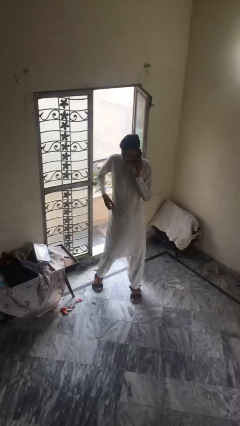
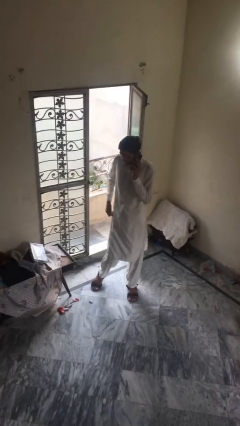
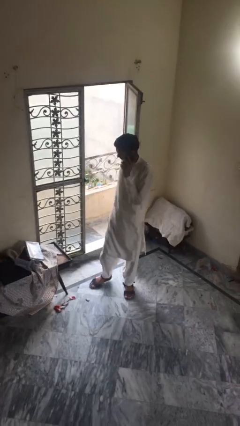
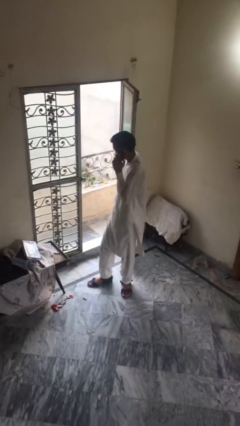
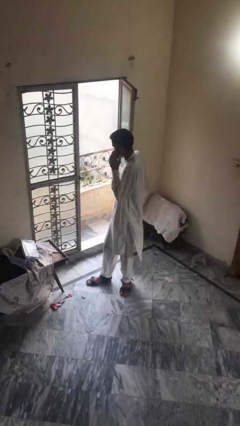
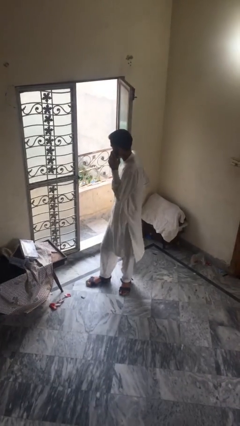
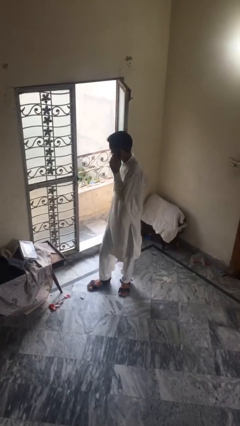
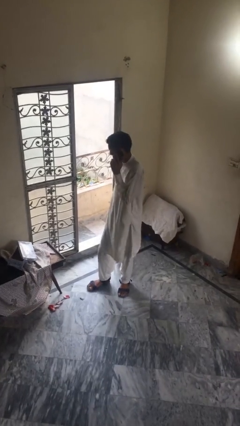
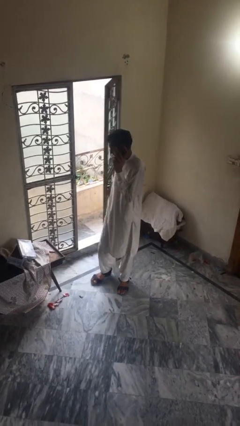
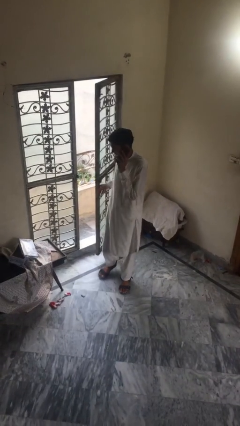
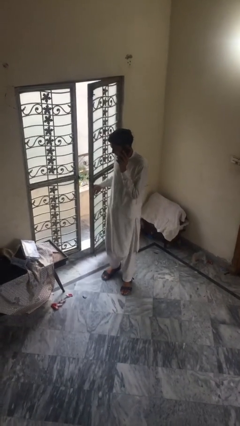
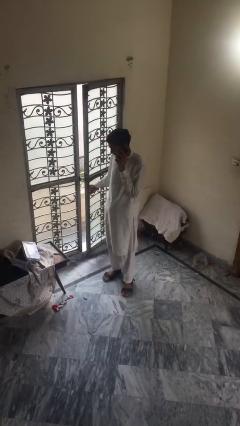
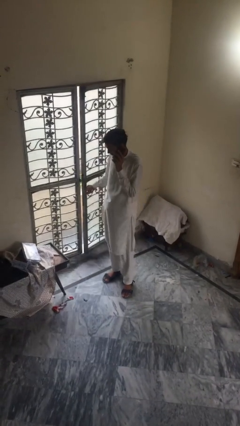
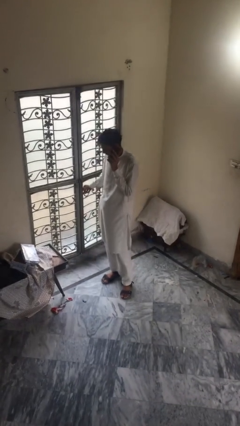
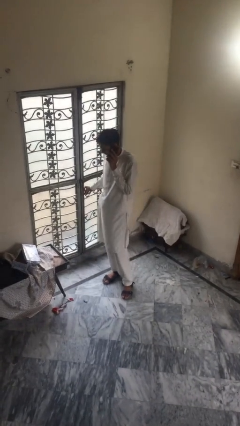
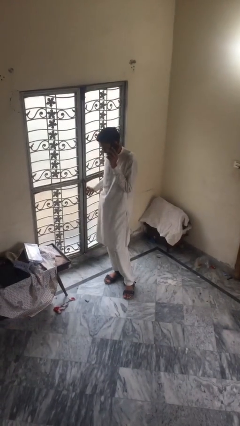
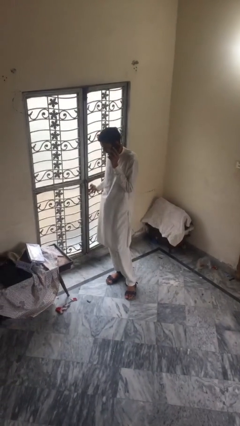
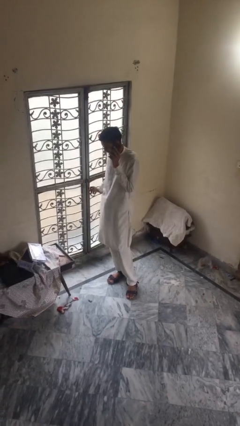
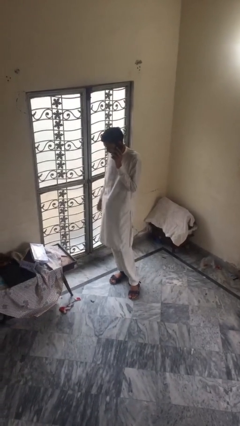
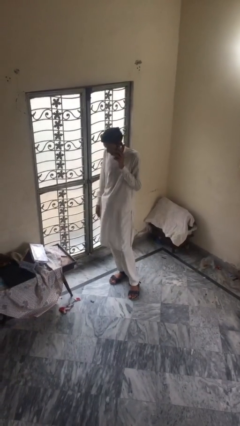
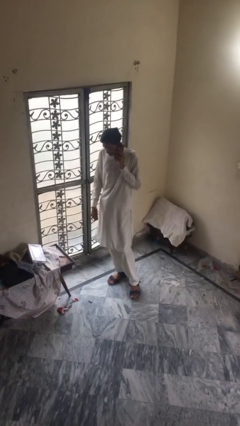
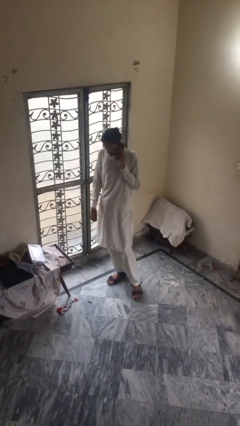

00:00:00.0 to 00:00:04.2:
person closes facility door

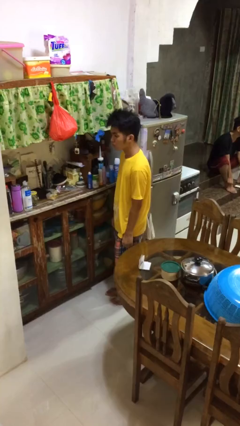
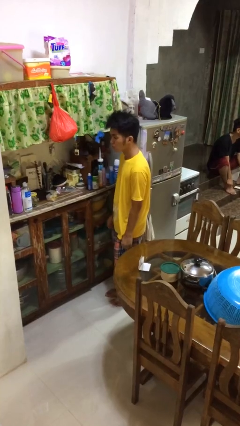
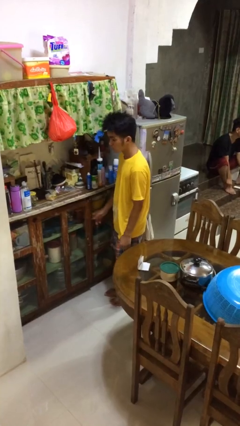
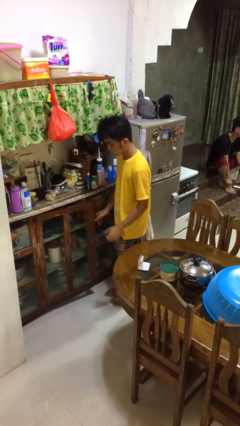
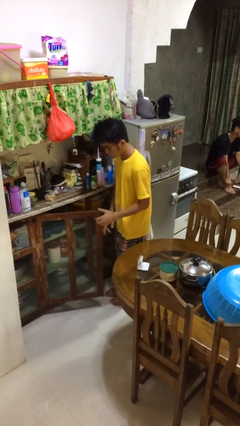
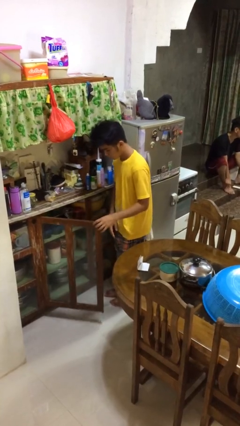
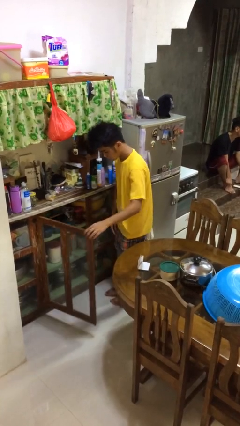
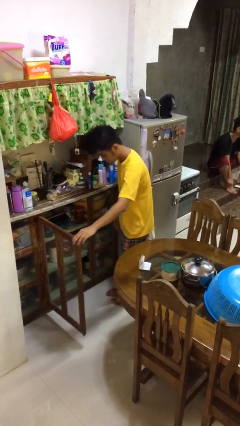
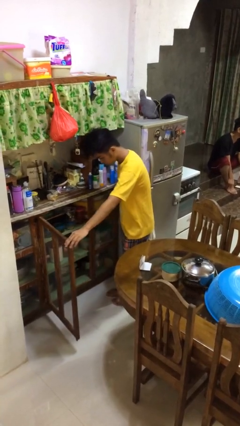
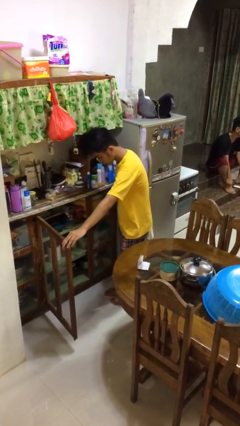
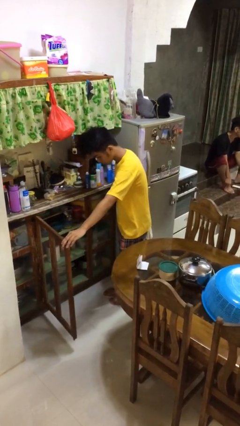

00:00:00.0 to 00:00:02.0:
person opens cabinet

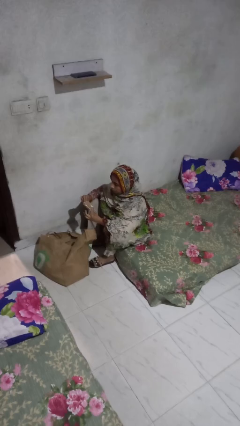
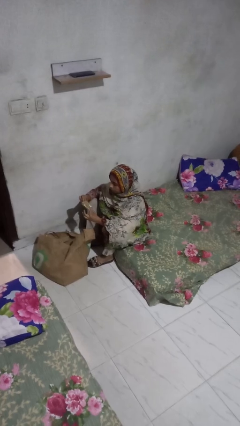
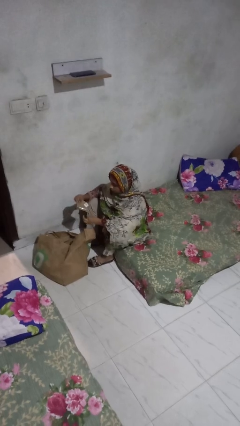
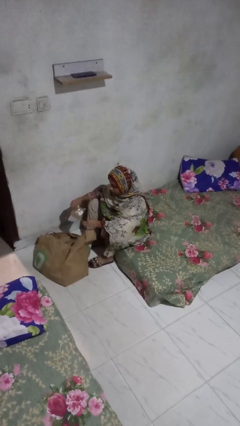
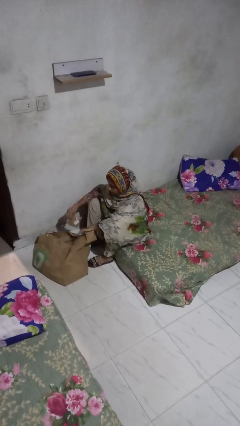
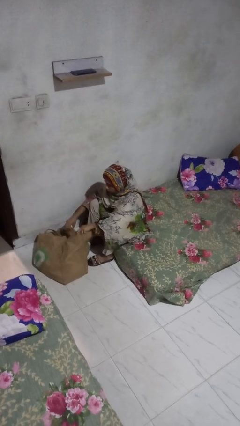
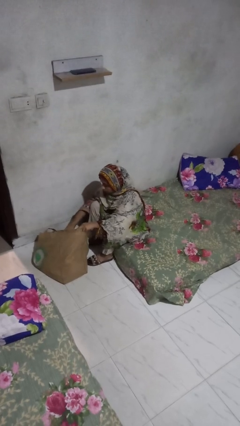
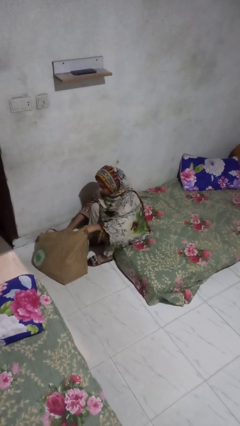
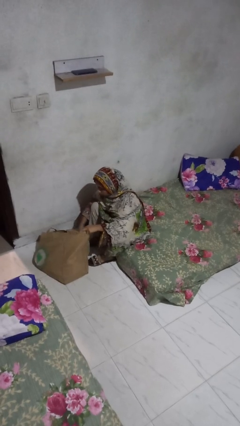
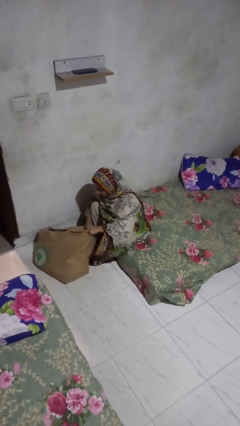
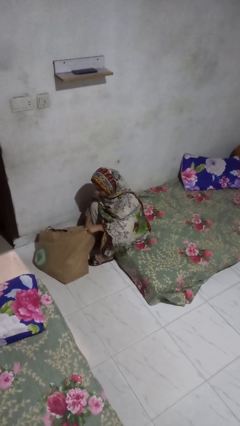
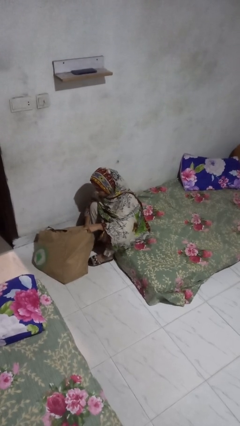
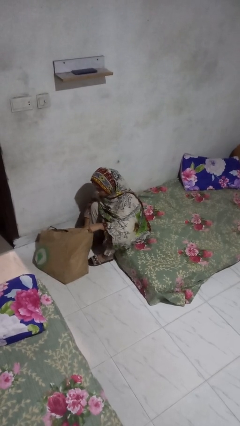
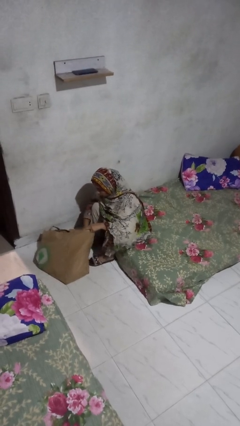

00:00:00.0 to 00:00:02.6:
person puts object into bag

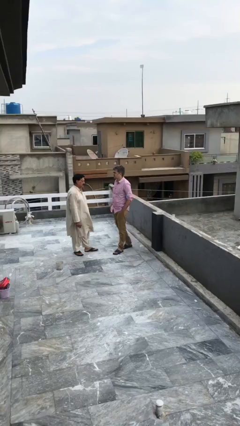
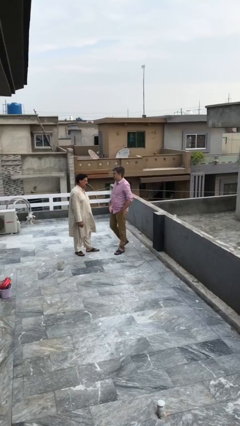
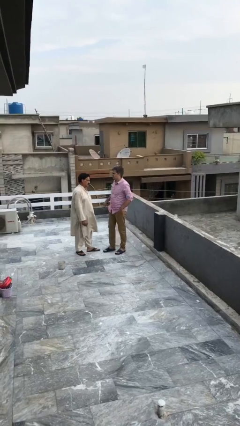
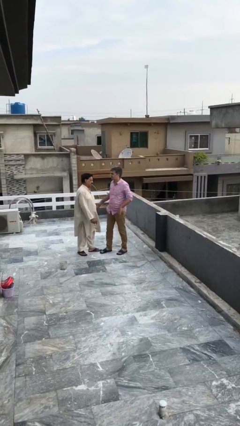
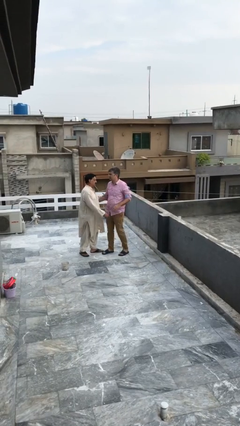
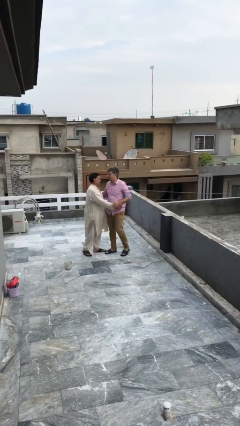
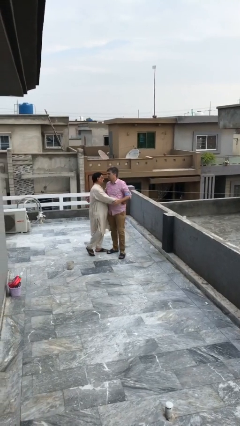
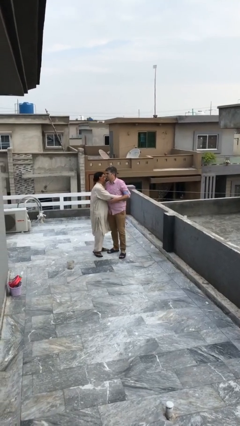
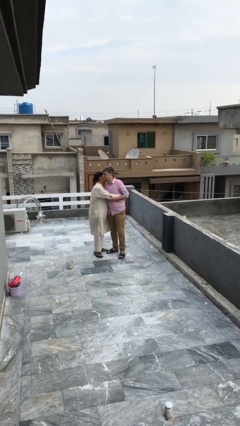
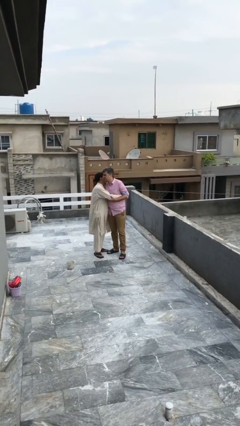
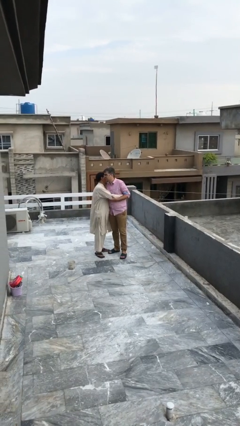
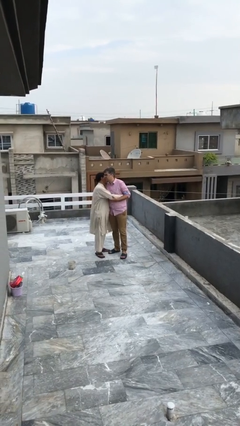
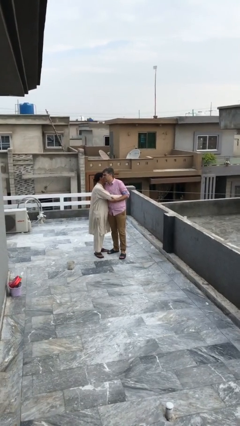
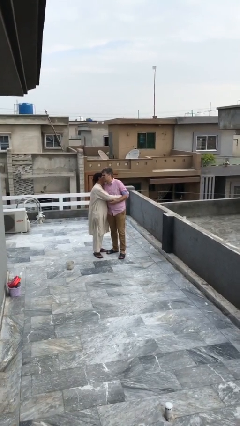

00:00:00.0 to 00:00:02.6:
person embraces person

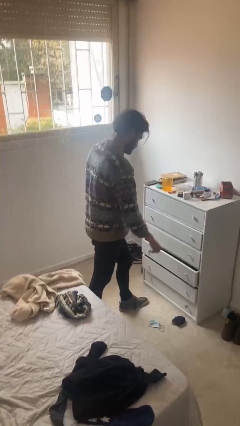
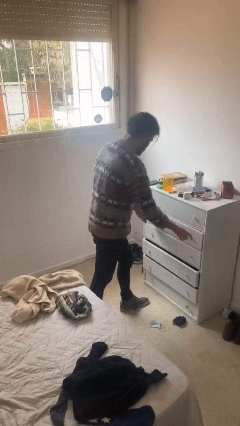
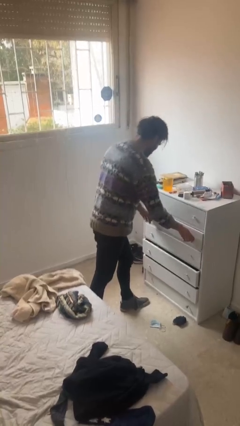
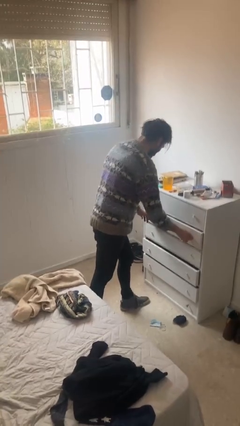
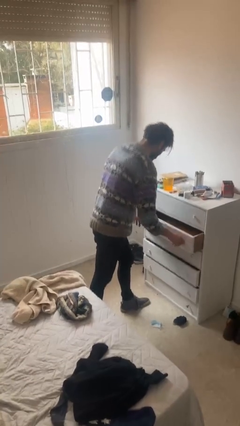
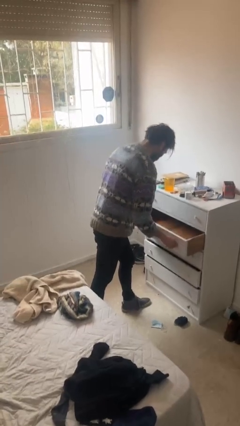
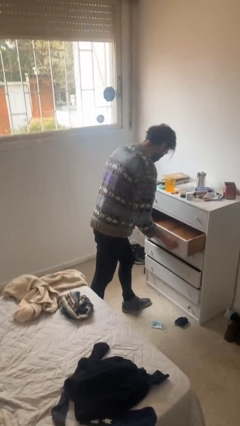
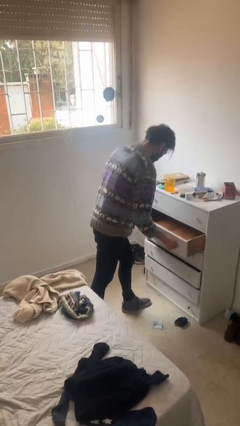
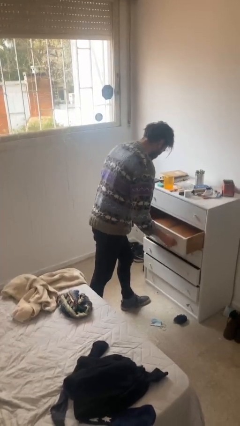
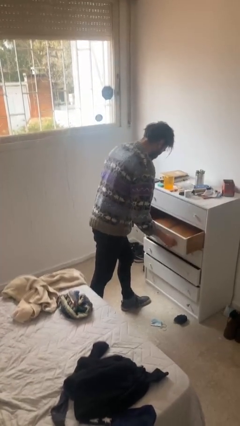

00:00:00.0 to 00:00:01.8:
person opens dresser drawer

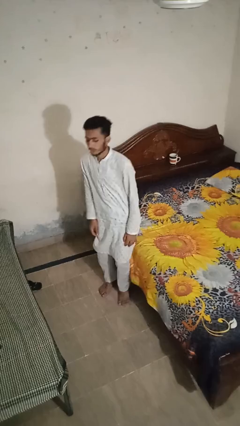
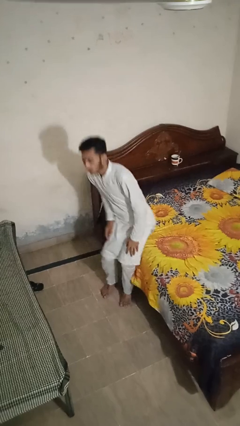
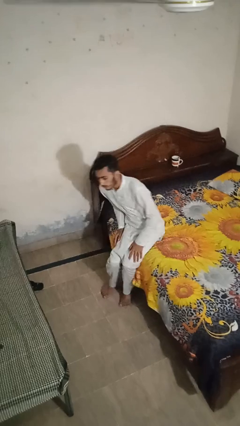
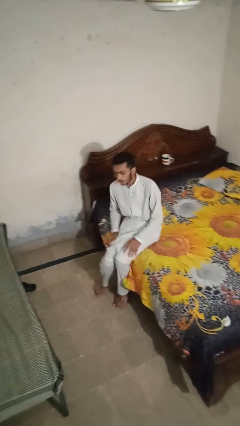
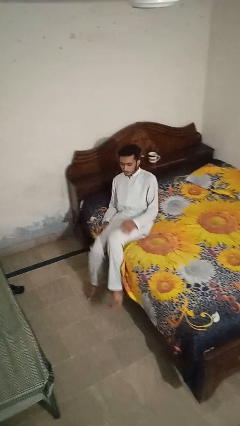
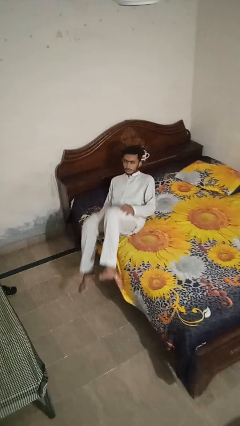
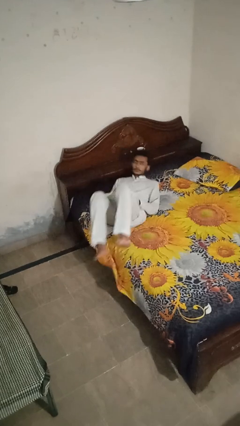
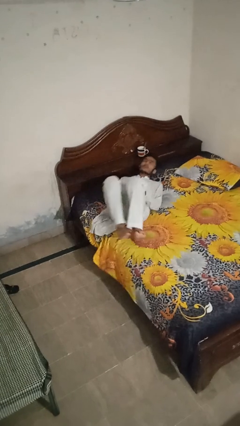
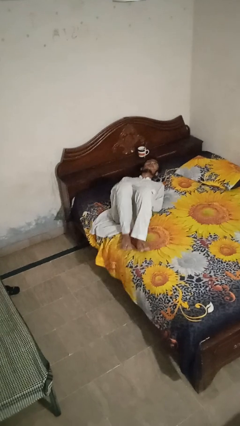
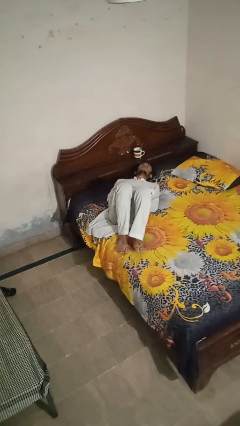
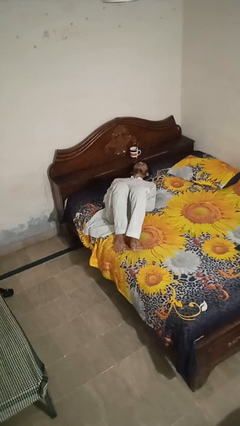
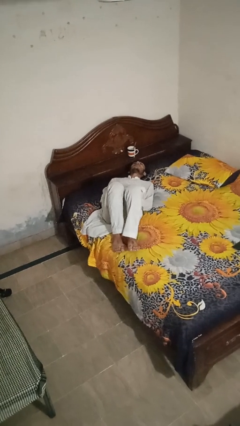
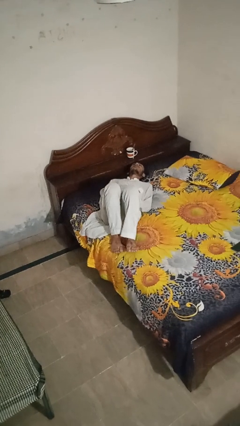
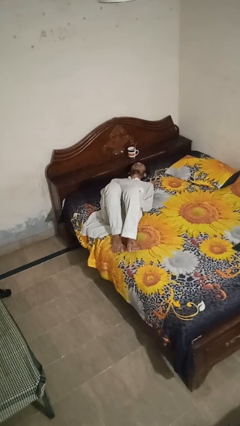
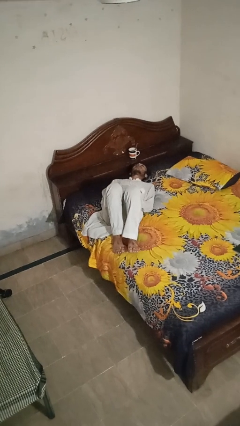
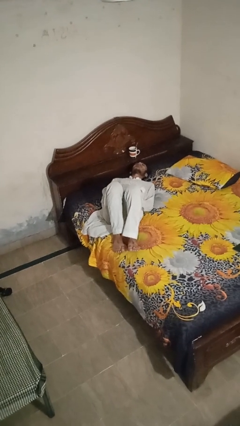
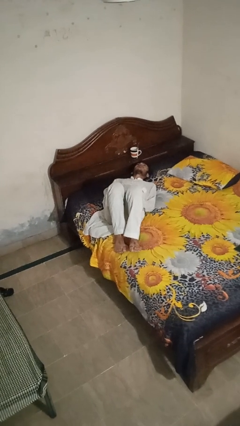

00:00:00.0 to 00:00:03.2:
person lies down on bed

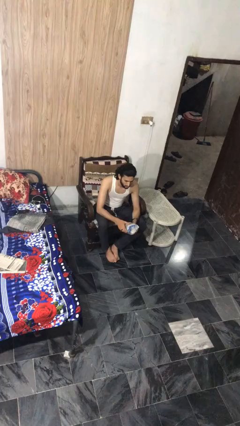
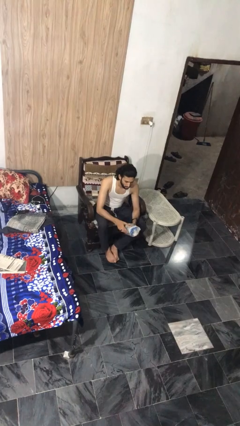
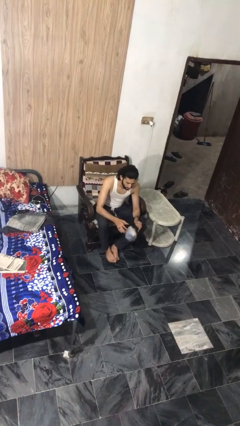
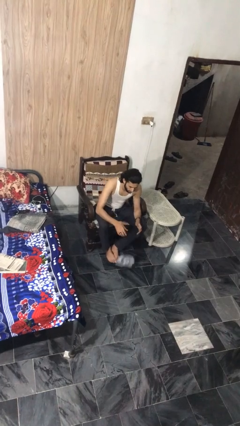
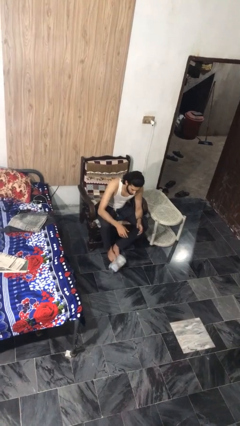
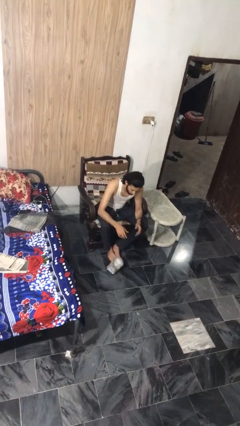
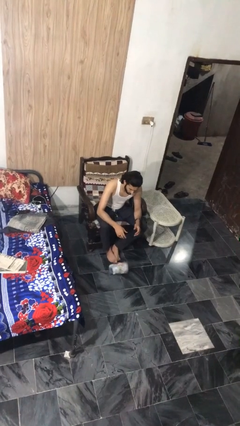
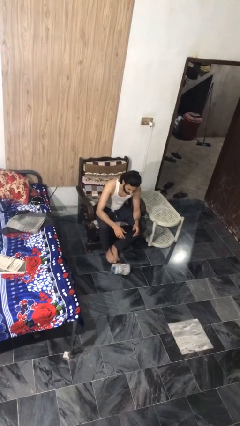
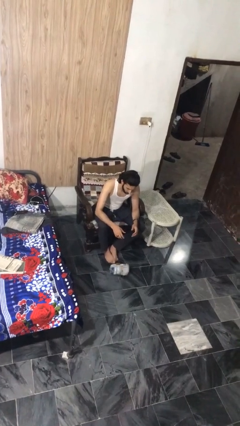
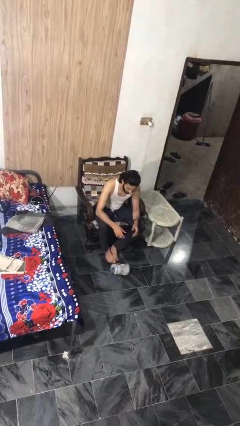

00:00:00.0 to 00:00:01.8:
person drops object
